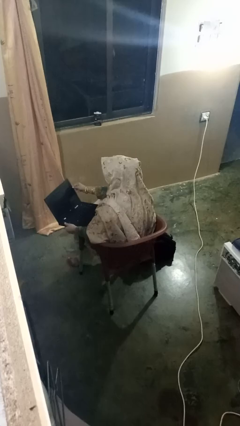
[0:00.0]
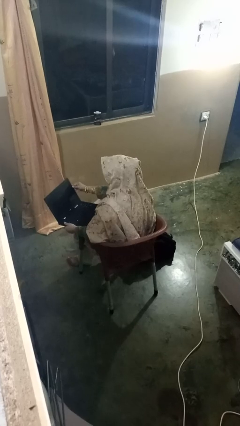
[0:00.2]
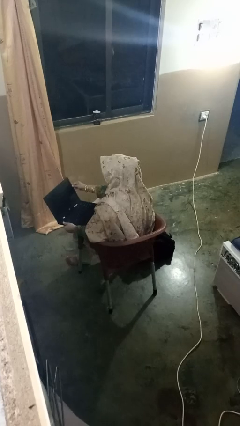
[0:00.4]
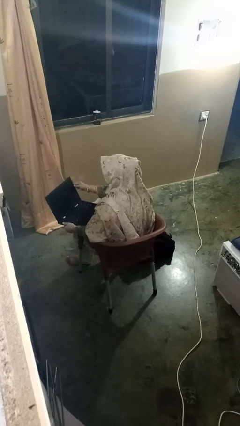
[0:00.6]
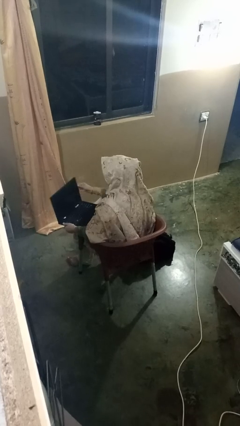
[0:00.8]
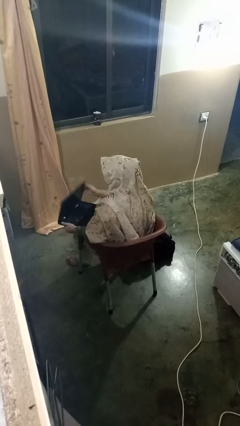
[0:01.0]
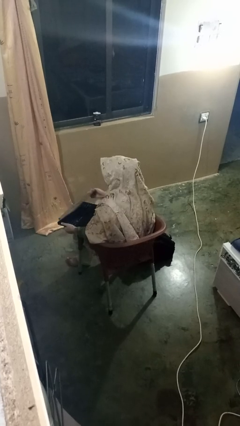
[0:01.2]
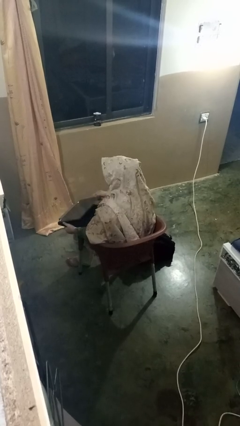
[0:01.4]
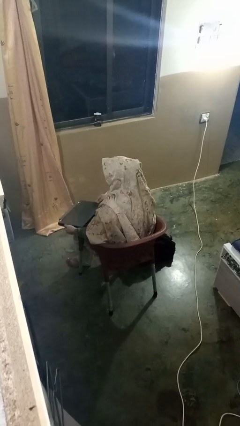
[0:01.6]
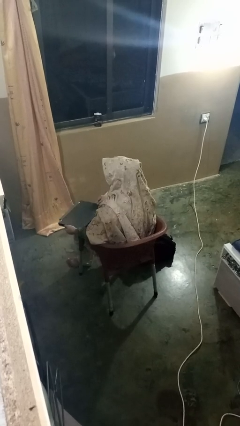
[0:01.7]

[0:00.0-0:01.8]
person closes laptop

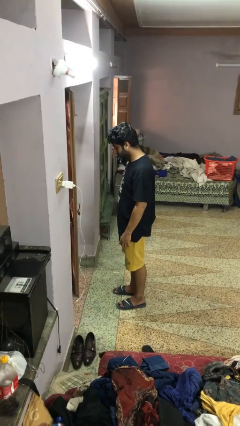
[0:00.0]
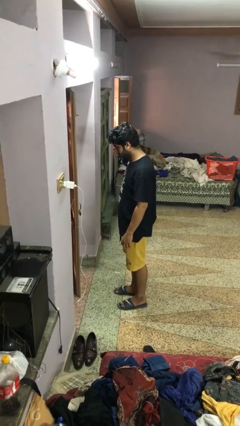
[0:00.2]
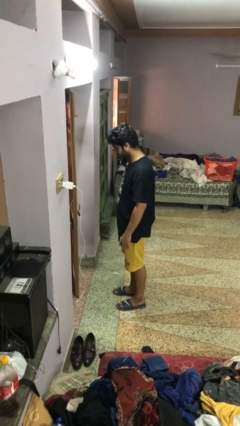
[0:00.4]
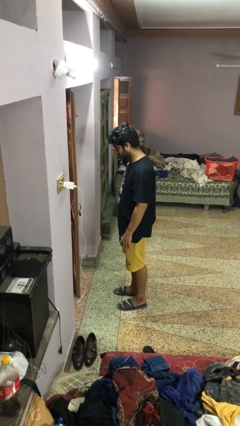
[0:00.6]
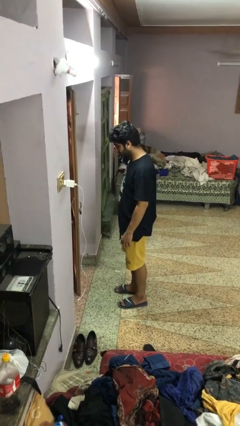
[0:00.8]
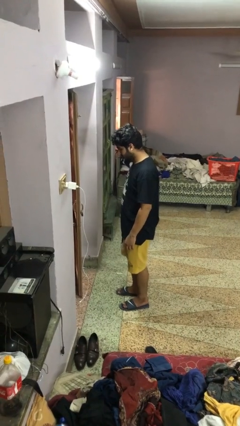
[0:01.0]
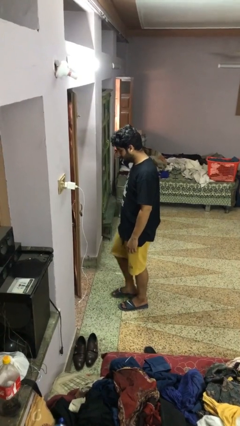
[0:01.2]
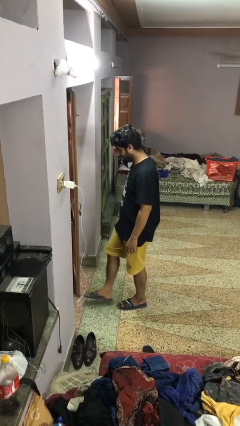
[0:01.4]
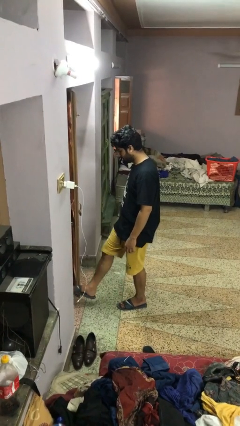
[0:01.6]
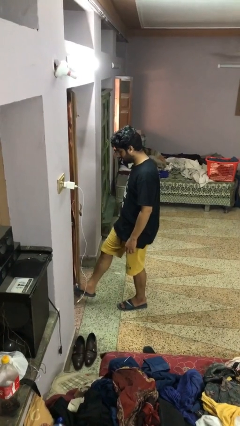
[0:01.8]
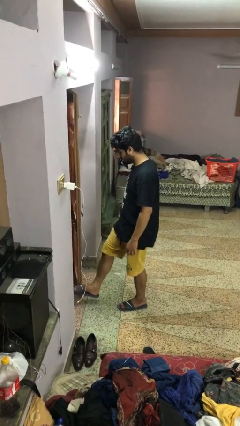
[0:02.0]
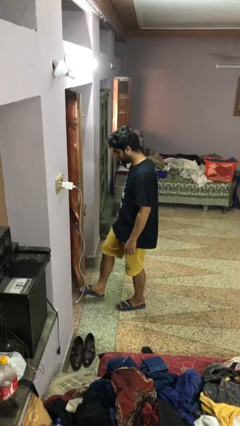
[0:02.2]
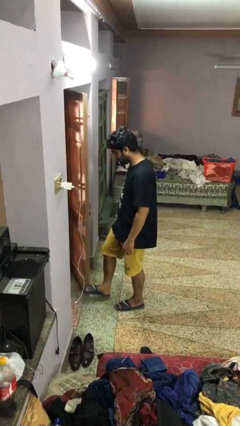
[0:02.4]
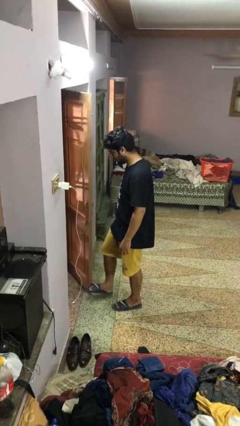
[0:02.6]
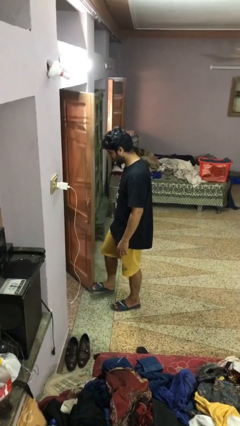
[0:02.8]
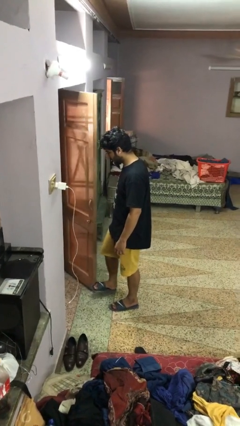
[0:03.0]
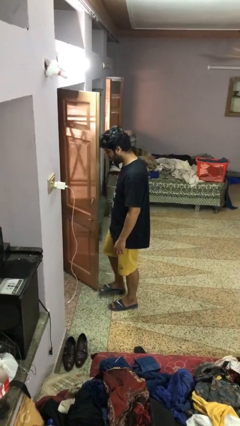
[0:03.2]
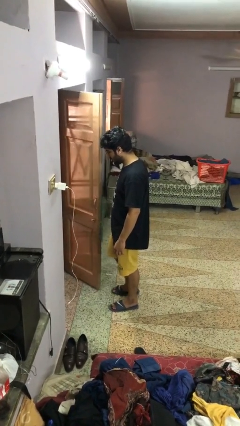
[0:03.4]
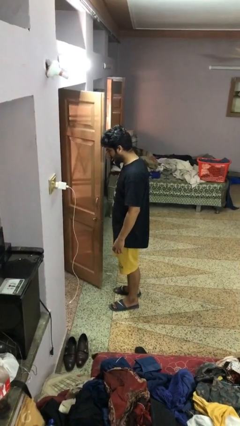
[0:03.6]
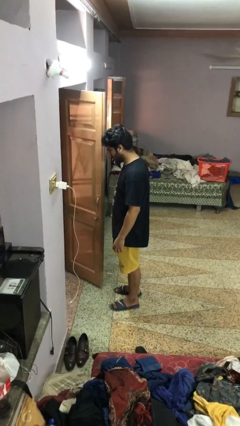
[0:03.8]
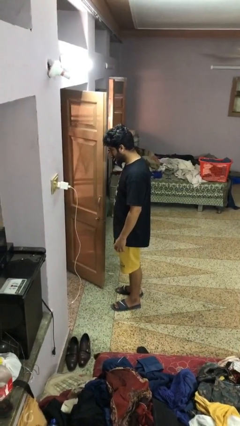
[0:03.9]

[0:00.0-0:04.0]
person opens facility door

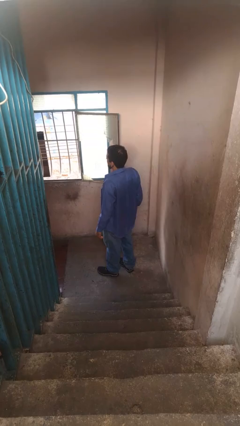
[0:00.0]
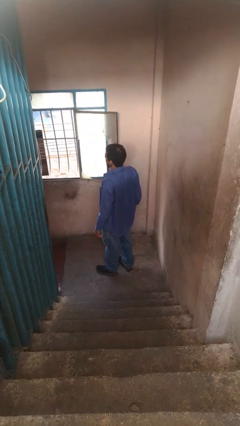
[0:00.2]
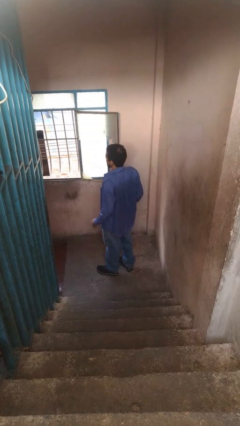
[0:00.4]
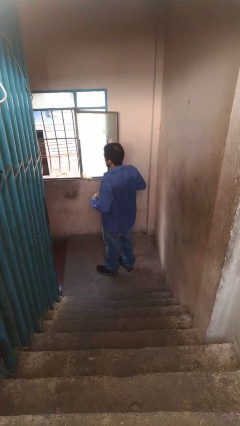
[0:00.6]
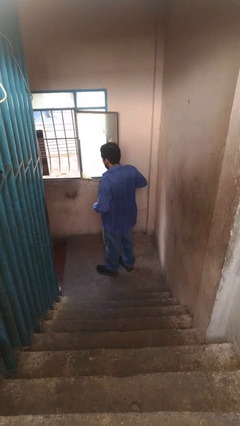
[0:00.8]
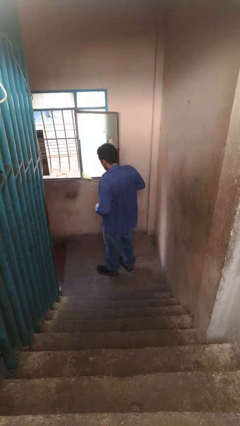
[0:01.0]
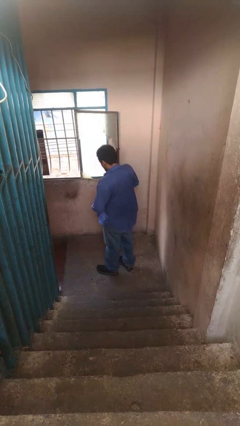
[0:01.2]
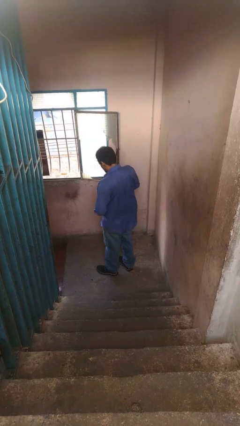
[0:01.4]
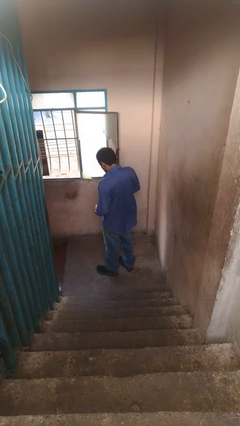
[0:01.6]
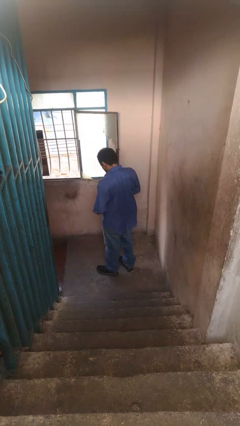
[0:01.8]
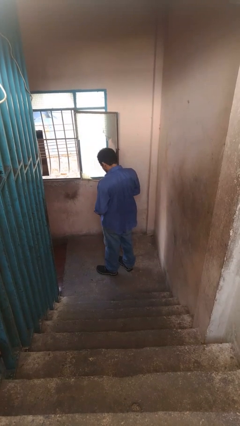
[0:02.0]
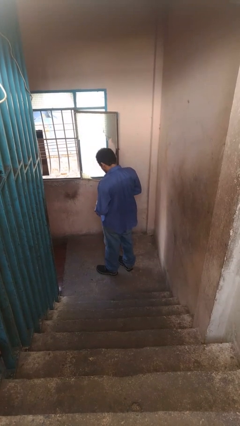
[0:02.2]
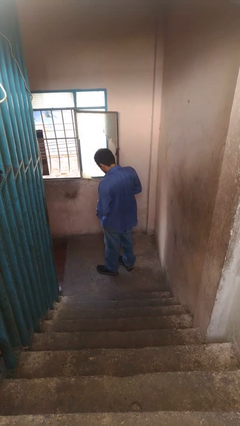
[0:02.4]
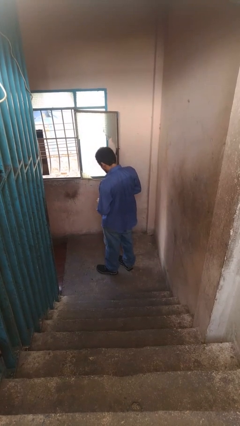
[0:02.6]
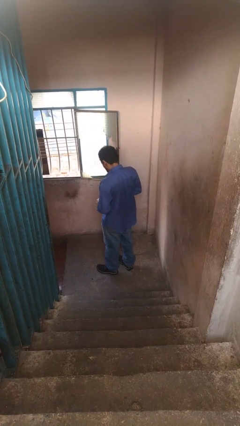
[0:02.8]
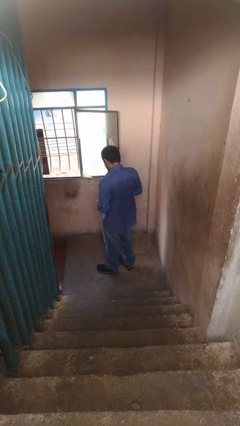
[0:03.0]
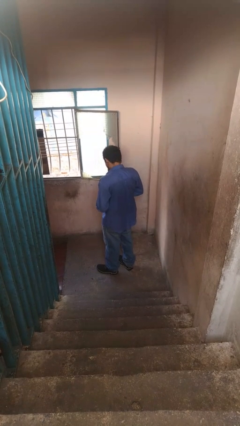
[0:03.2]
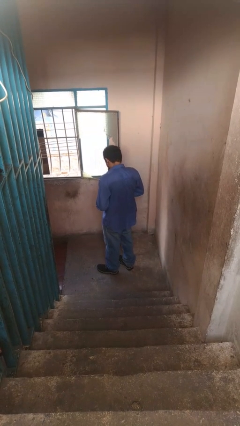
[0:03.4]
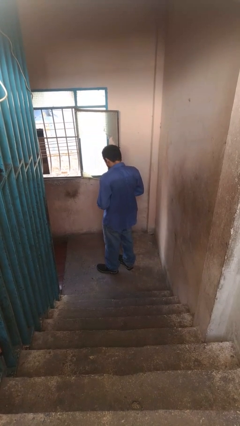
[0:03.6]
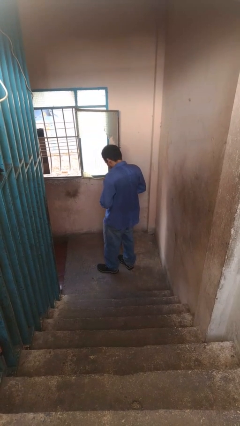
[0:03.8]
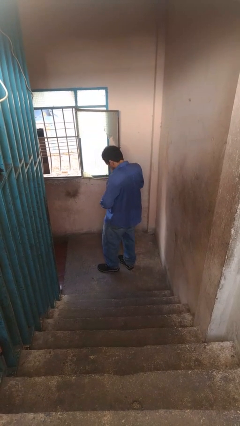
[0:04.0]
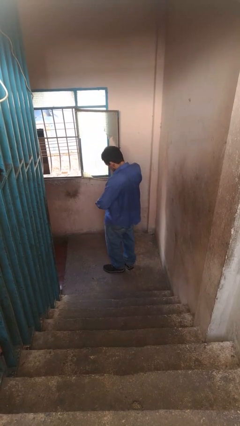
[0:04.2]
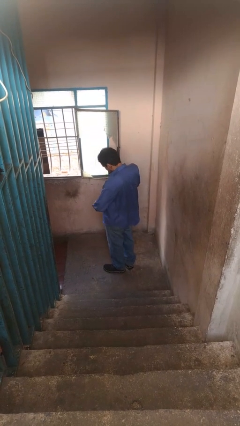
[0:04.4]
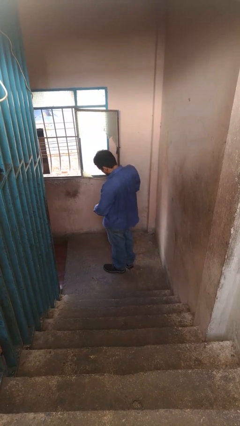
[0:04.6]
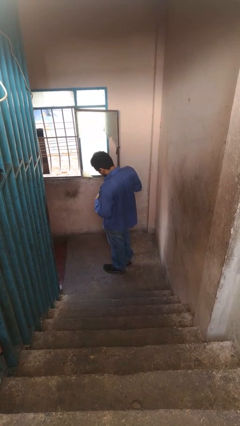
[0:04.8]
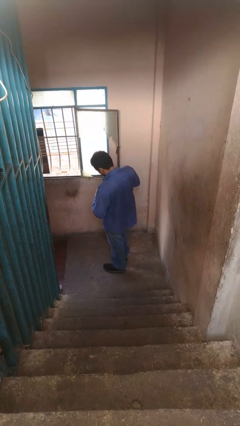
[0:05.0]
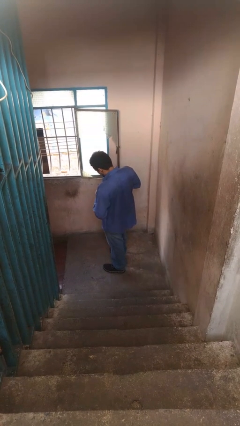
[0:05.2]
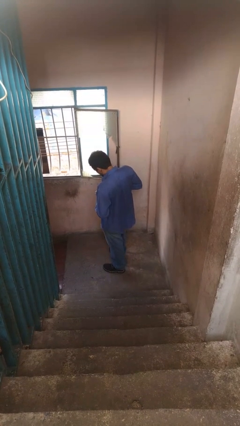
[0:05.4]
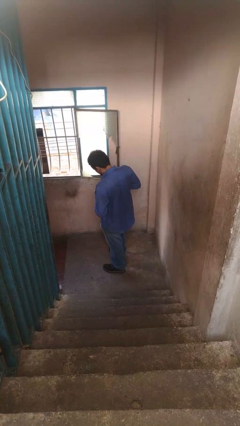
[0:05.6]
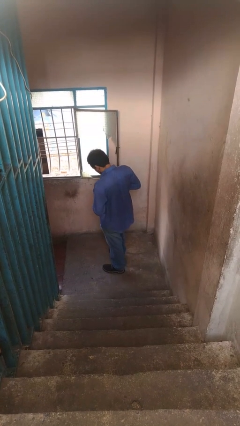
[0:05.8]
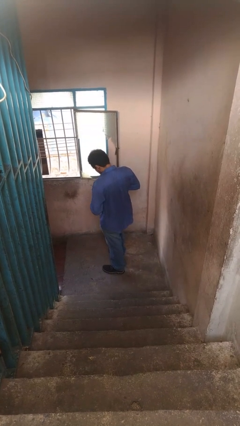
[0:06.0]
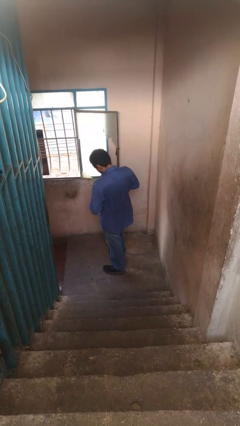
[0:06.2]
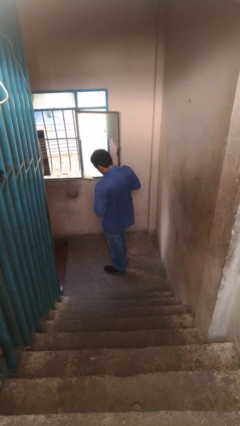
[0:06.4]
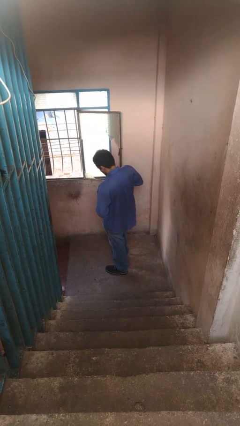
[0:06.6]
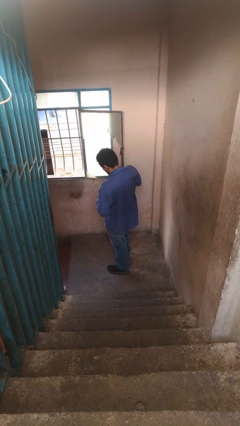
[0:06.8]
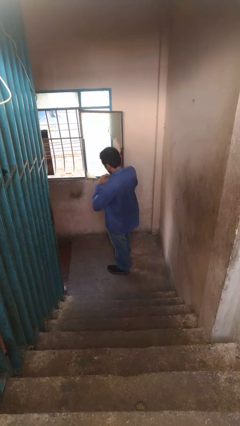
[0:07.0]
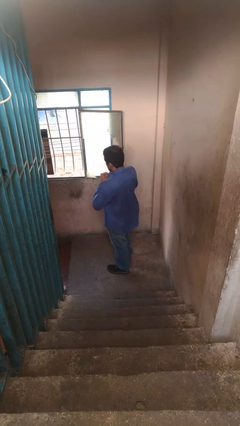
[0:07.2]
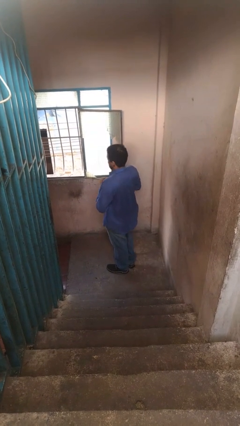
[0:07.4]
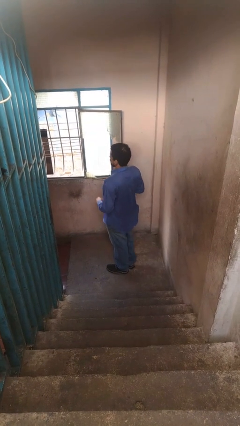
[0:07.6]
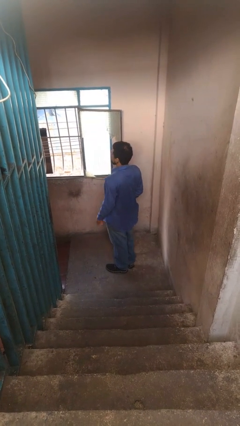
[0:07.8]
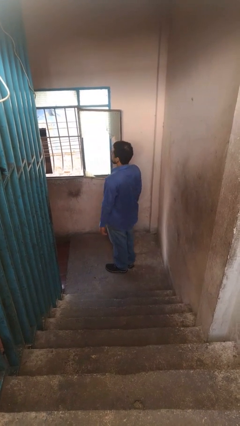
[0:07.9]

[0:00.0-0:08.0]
person buttons shirt

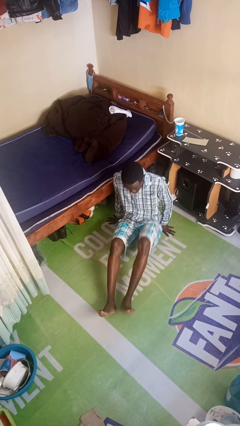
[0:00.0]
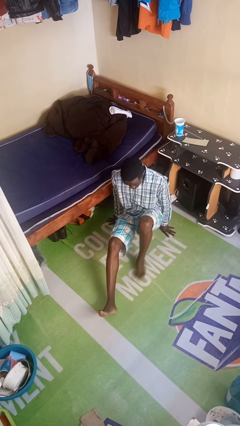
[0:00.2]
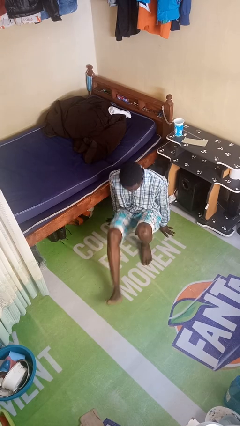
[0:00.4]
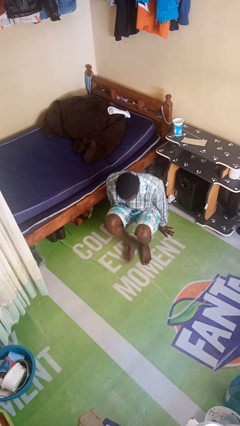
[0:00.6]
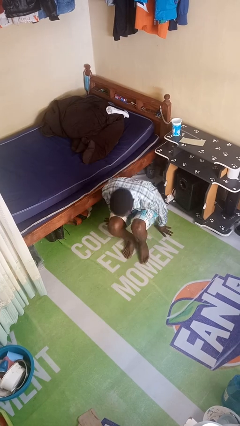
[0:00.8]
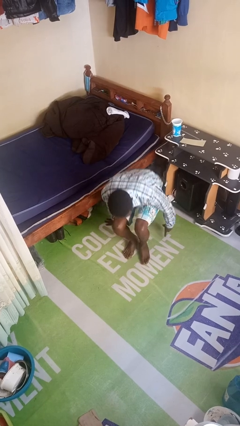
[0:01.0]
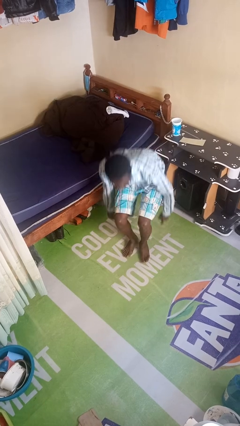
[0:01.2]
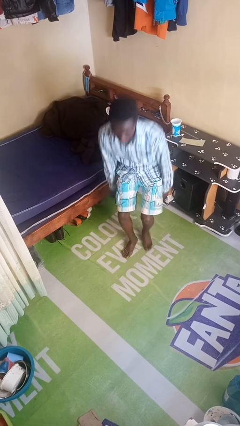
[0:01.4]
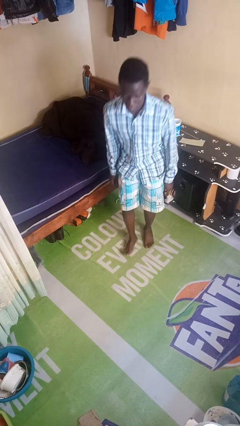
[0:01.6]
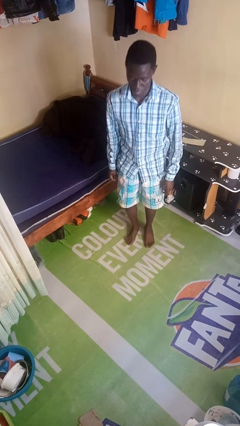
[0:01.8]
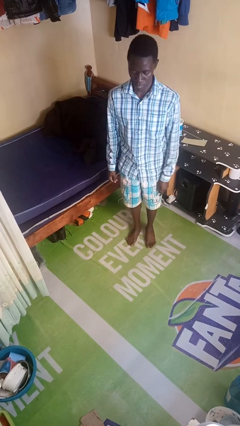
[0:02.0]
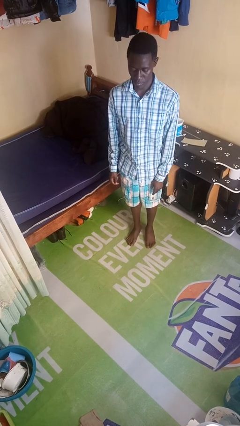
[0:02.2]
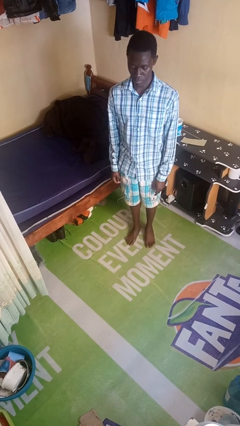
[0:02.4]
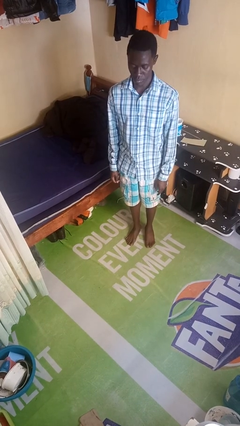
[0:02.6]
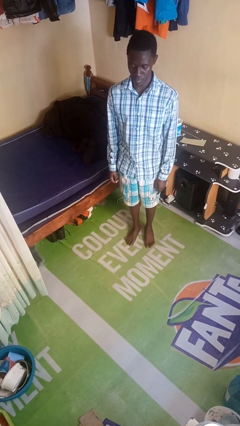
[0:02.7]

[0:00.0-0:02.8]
person stands up from floor

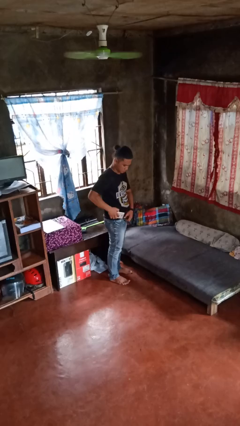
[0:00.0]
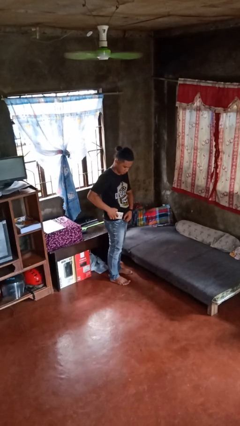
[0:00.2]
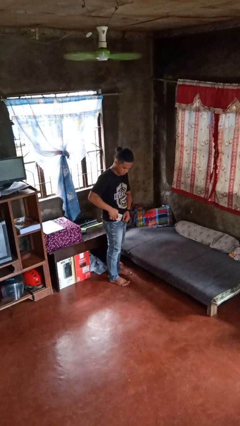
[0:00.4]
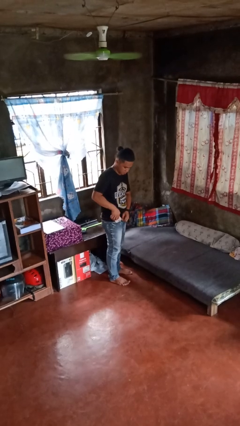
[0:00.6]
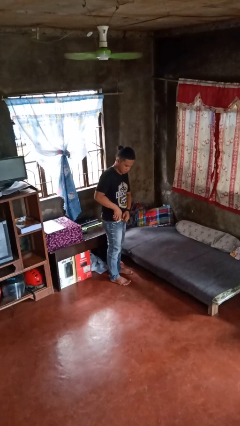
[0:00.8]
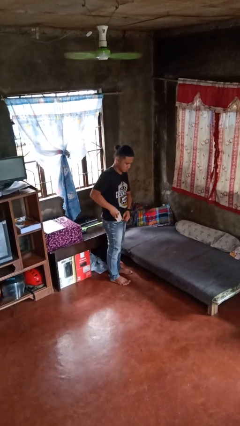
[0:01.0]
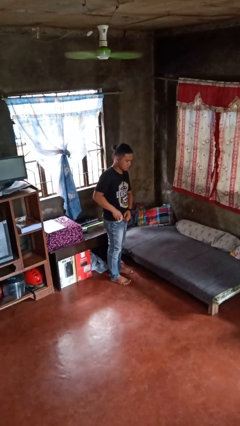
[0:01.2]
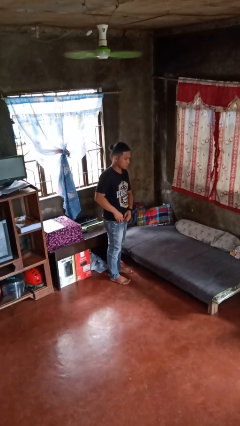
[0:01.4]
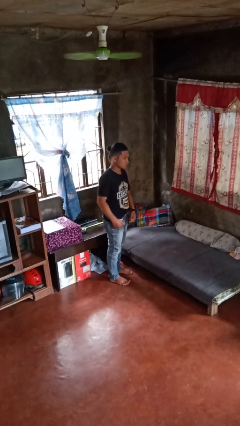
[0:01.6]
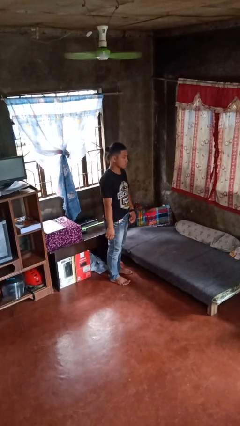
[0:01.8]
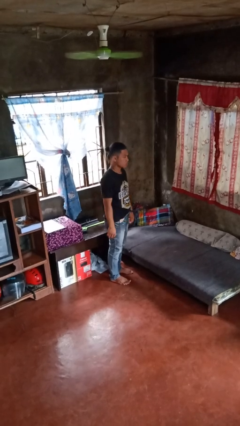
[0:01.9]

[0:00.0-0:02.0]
person puts phone into pocket
